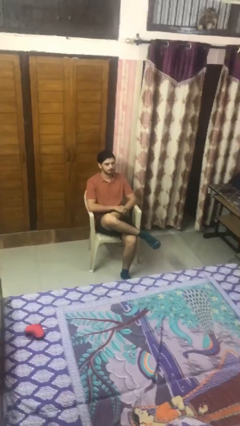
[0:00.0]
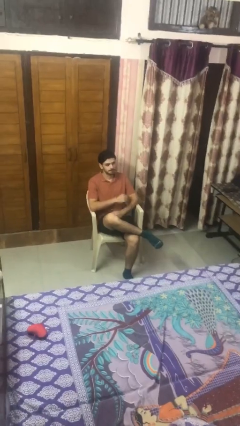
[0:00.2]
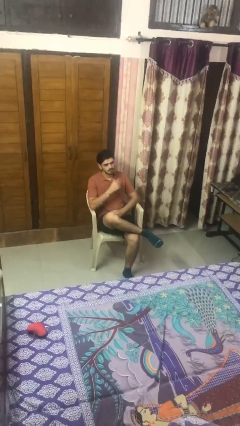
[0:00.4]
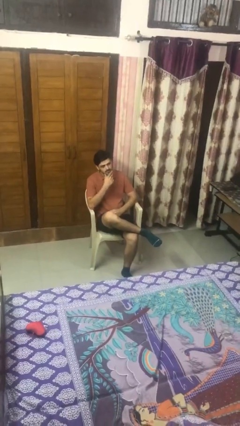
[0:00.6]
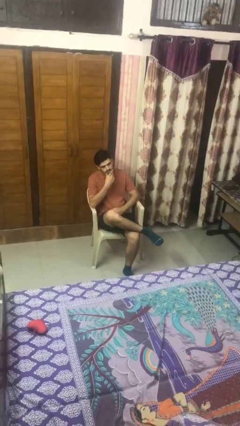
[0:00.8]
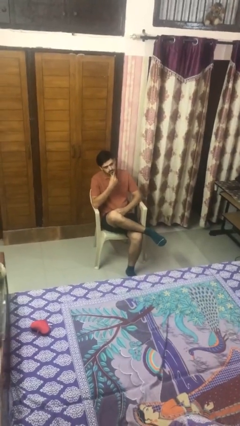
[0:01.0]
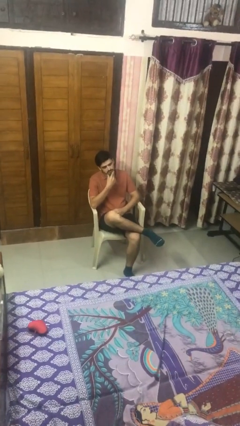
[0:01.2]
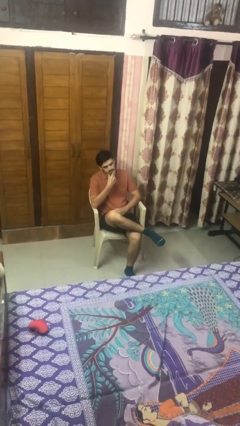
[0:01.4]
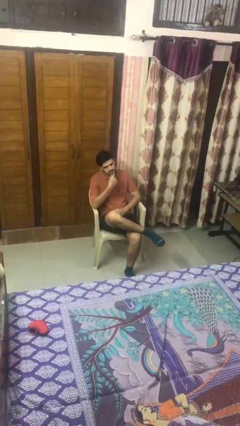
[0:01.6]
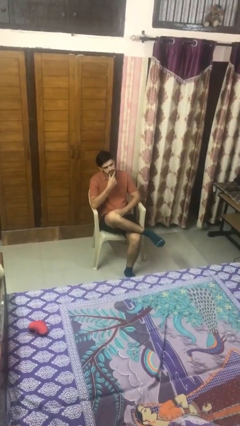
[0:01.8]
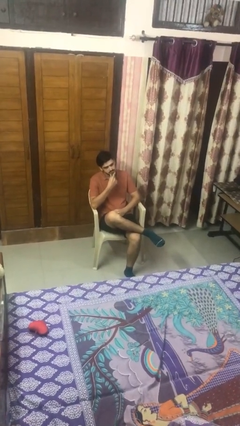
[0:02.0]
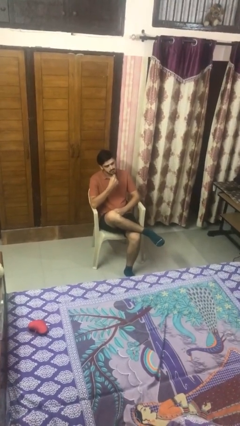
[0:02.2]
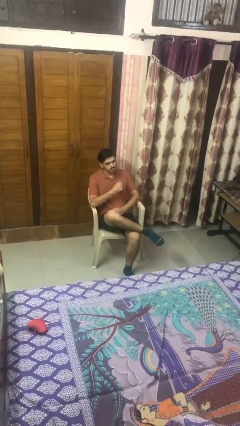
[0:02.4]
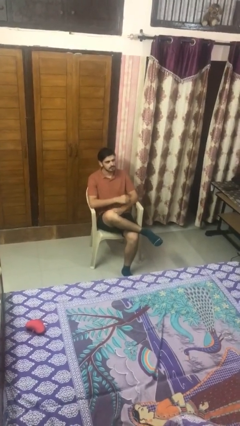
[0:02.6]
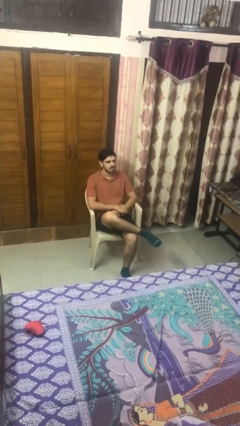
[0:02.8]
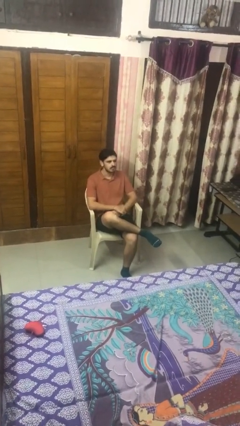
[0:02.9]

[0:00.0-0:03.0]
person strokes chin

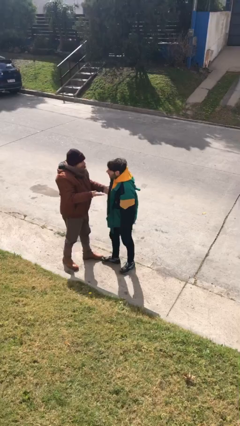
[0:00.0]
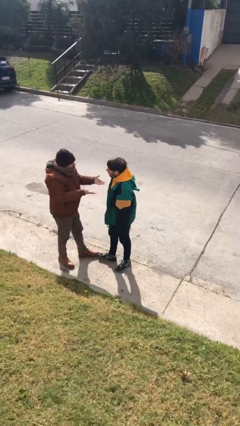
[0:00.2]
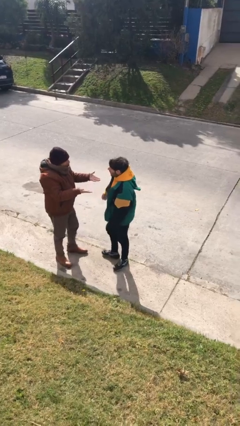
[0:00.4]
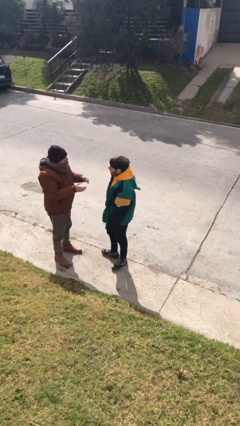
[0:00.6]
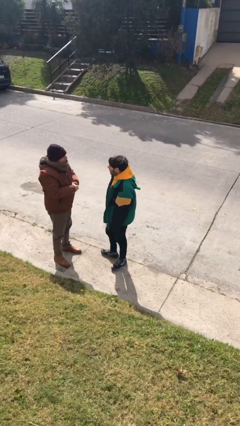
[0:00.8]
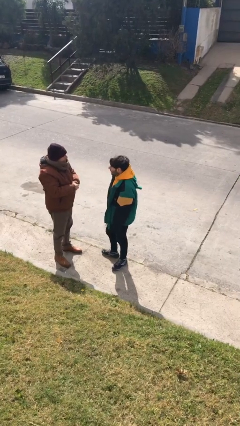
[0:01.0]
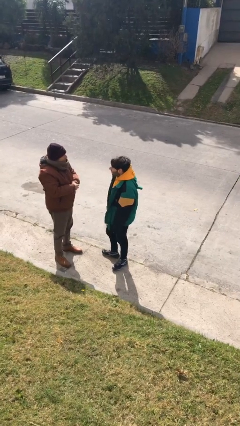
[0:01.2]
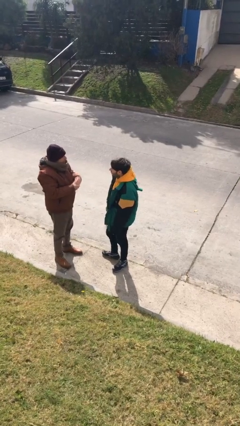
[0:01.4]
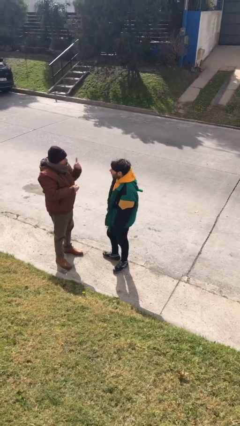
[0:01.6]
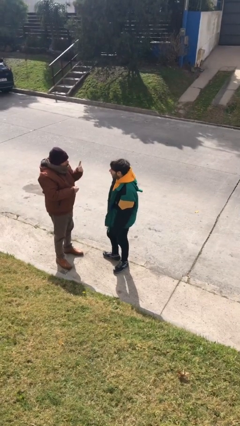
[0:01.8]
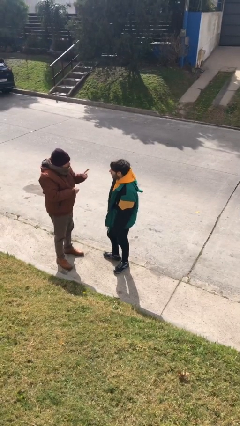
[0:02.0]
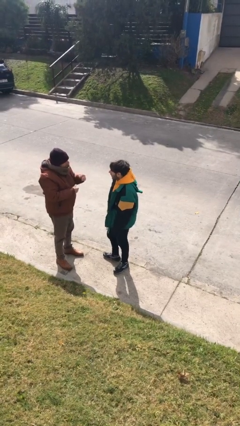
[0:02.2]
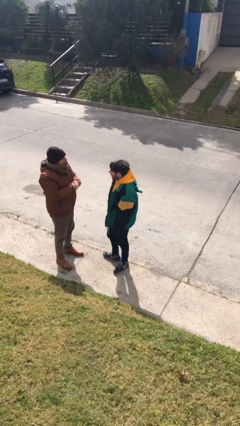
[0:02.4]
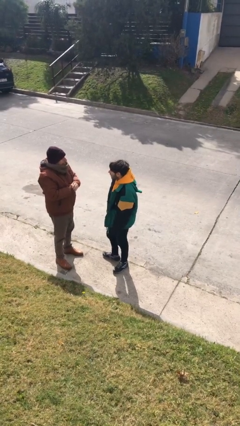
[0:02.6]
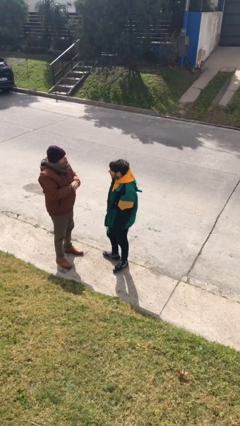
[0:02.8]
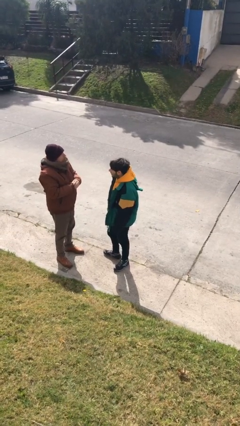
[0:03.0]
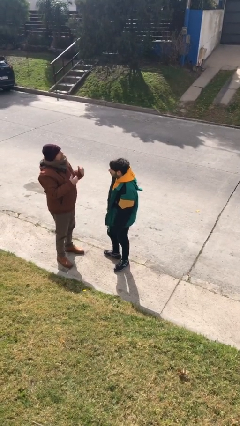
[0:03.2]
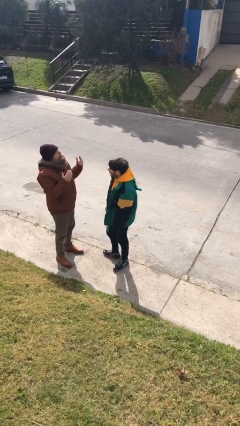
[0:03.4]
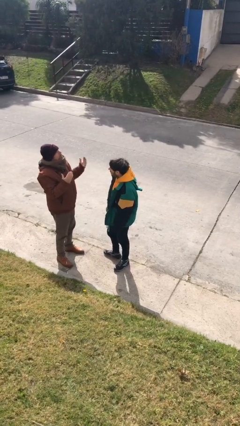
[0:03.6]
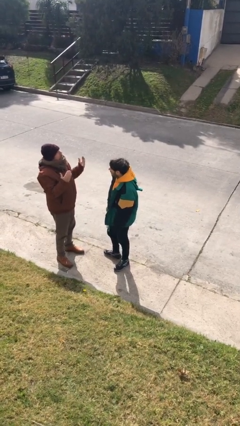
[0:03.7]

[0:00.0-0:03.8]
person talks to person

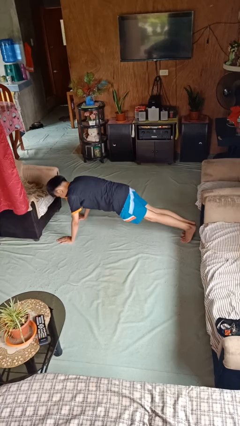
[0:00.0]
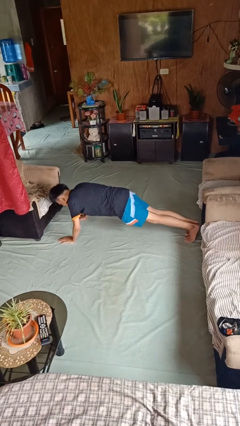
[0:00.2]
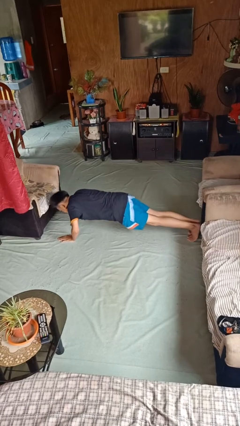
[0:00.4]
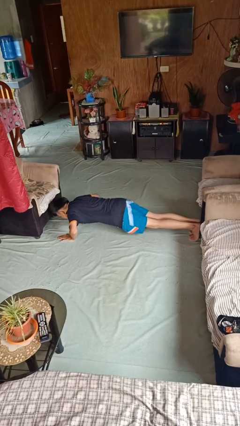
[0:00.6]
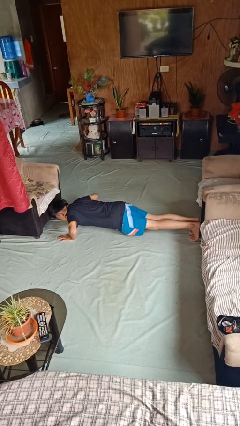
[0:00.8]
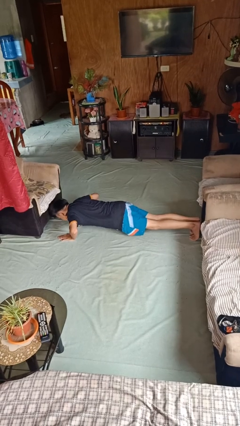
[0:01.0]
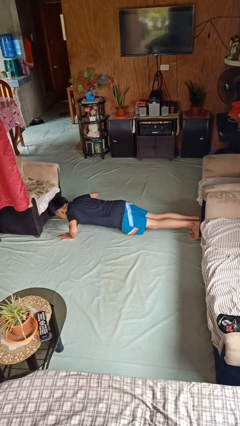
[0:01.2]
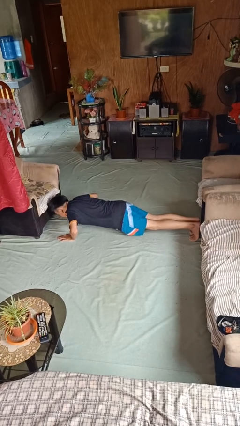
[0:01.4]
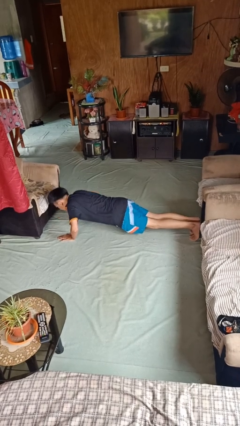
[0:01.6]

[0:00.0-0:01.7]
person exercises with pushup

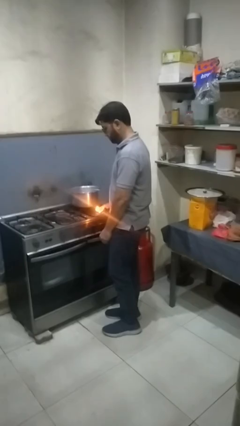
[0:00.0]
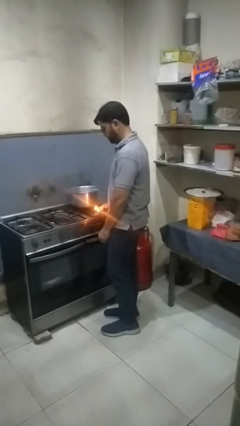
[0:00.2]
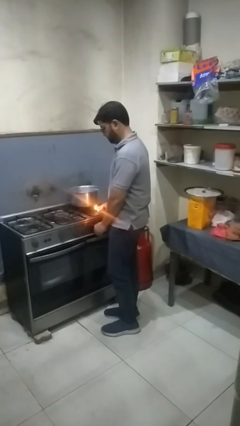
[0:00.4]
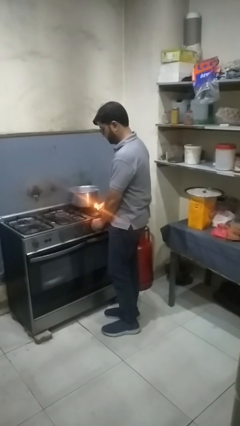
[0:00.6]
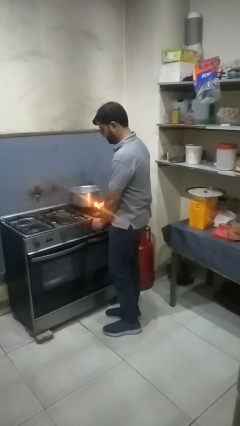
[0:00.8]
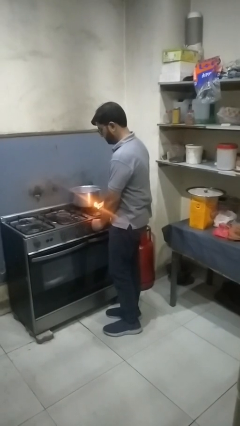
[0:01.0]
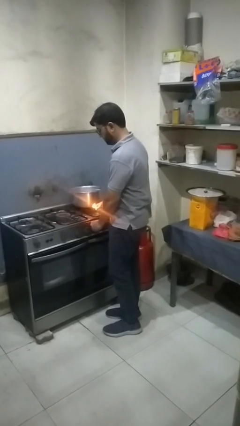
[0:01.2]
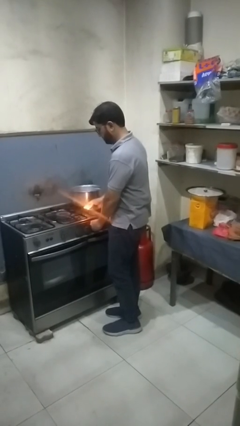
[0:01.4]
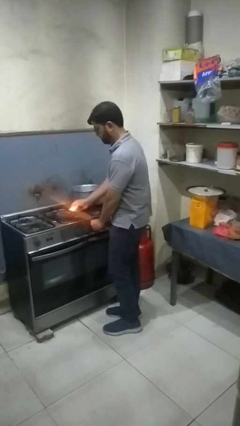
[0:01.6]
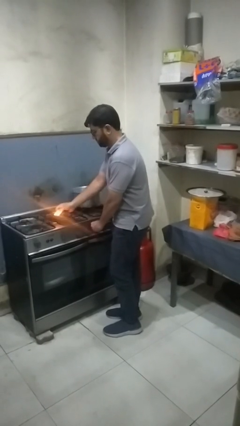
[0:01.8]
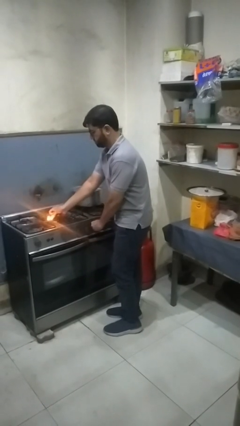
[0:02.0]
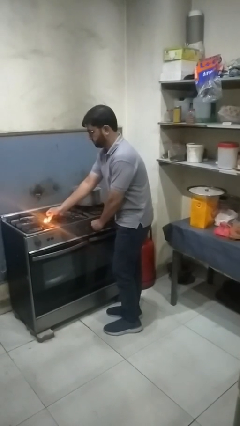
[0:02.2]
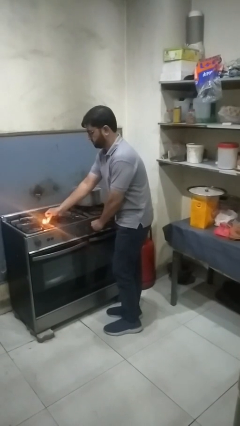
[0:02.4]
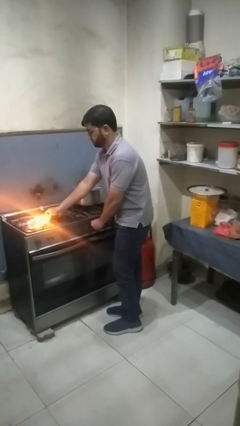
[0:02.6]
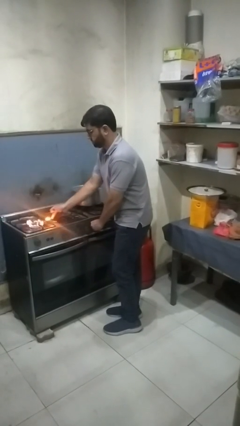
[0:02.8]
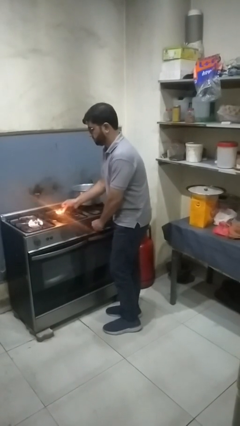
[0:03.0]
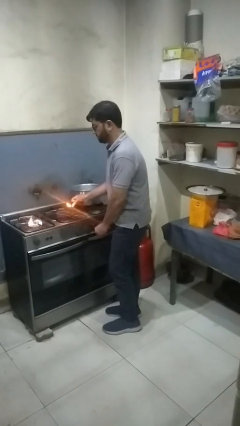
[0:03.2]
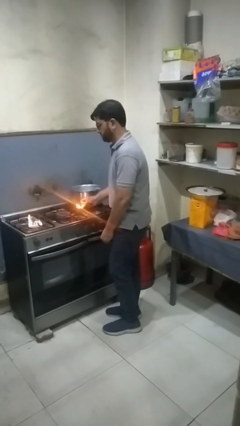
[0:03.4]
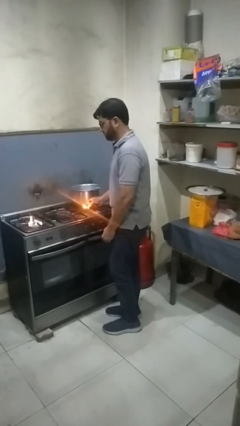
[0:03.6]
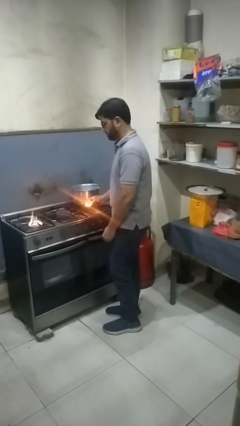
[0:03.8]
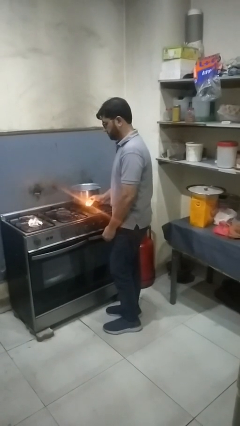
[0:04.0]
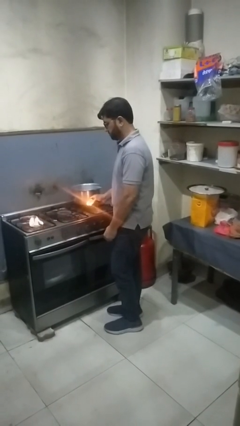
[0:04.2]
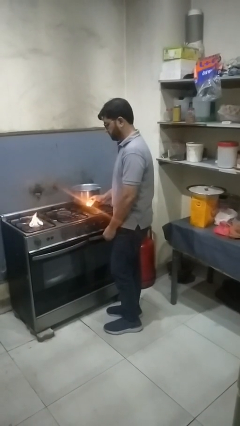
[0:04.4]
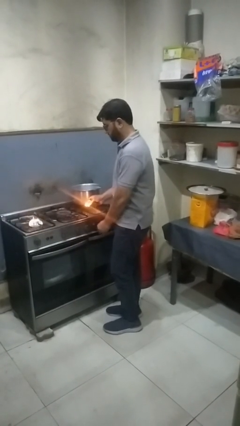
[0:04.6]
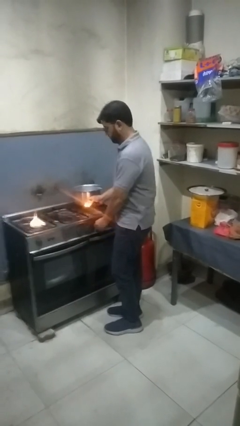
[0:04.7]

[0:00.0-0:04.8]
person turns on stovetop

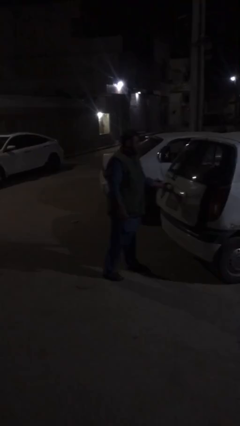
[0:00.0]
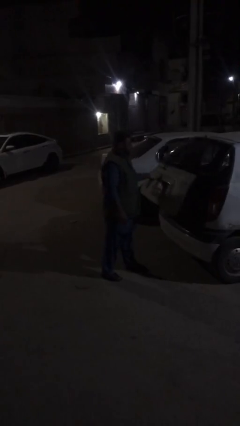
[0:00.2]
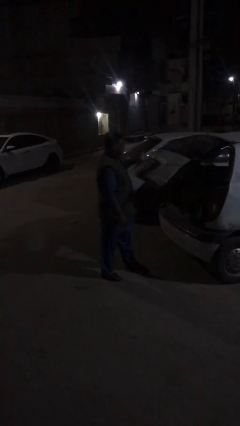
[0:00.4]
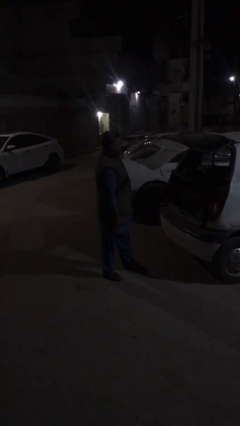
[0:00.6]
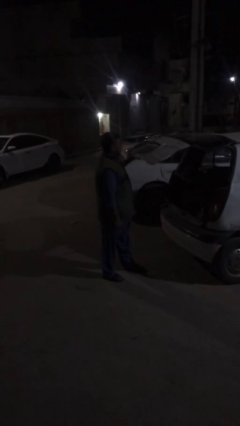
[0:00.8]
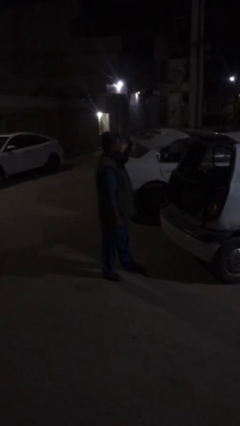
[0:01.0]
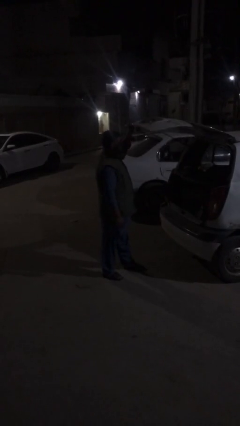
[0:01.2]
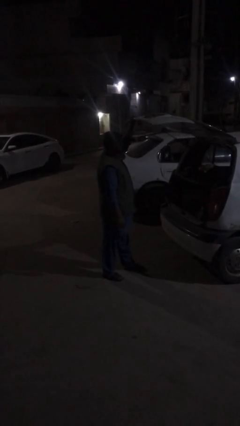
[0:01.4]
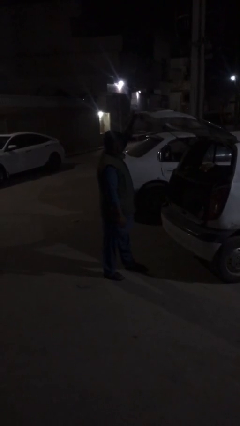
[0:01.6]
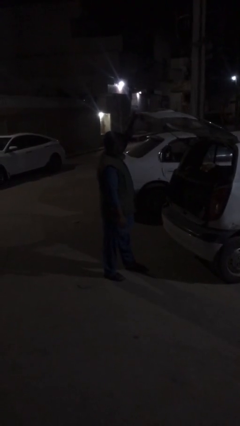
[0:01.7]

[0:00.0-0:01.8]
person opens car trunk

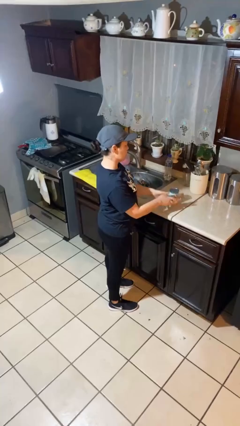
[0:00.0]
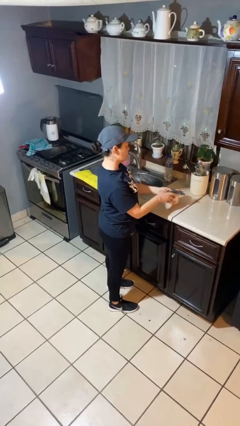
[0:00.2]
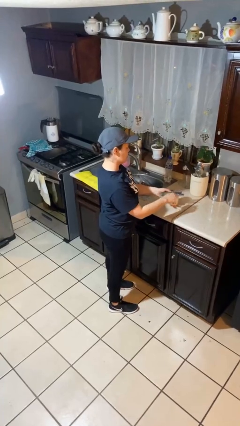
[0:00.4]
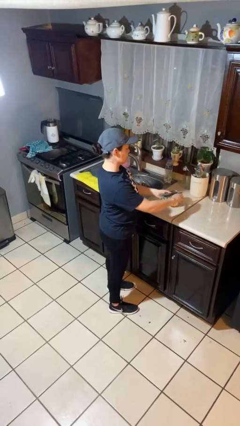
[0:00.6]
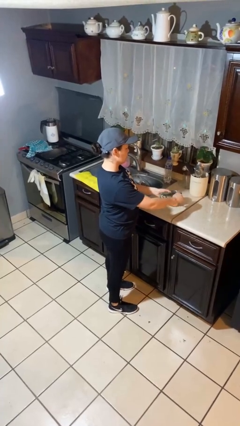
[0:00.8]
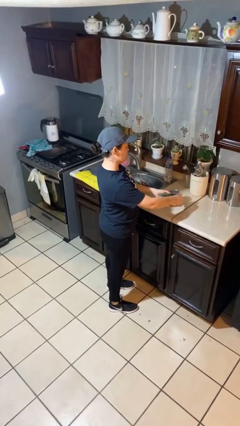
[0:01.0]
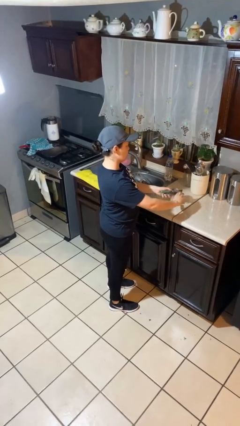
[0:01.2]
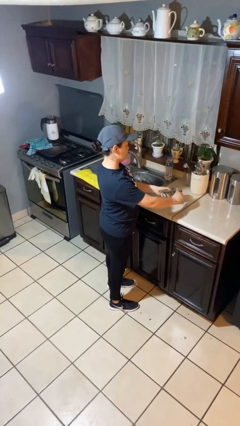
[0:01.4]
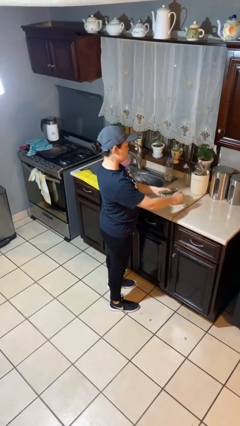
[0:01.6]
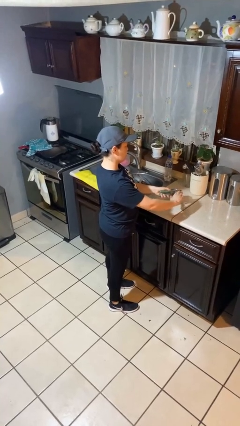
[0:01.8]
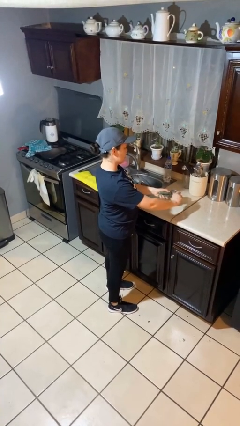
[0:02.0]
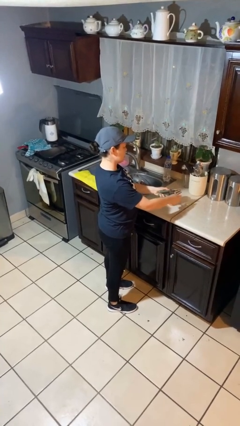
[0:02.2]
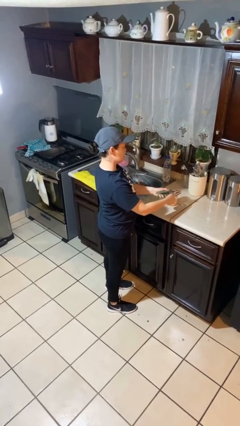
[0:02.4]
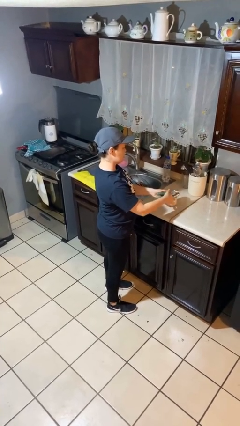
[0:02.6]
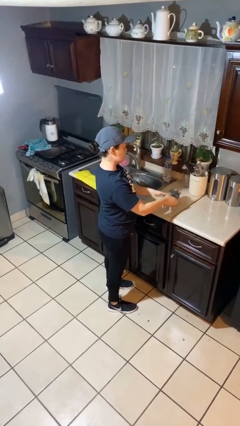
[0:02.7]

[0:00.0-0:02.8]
person opens can with can opener
